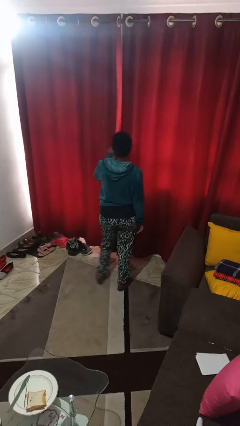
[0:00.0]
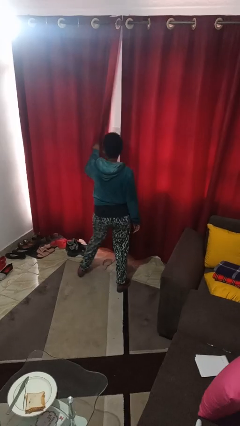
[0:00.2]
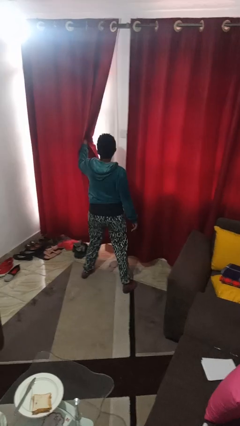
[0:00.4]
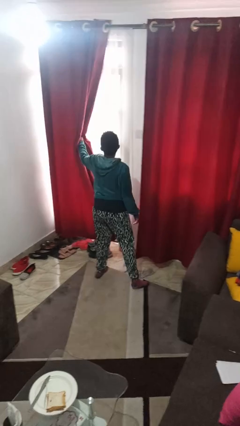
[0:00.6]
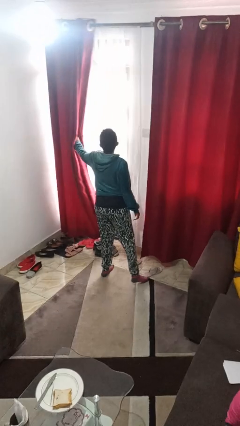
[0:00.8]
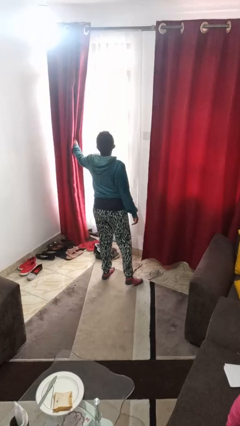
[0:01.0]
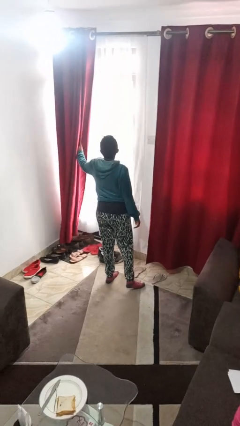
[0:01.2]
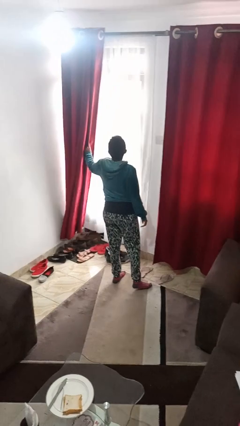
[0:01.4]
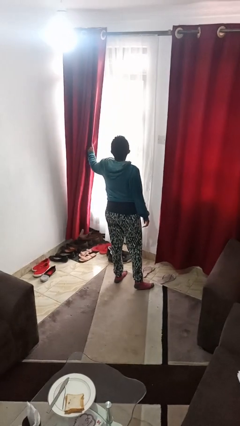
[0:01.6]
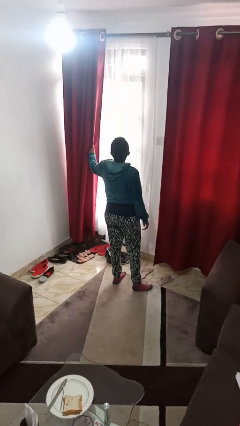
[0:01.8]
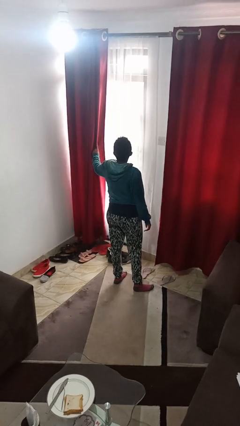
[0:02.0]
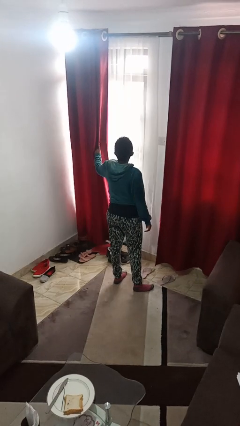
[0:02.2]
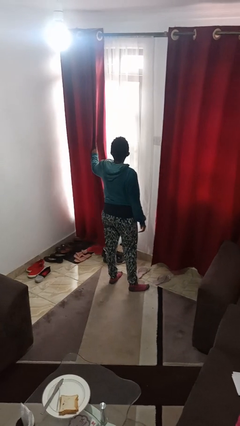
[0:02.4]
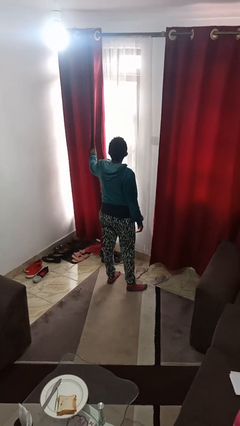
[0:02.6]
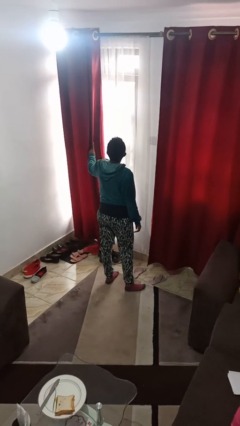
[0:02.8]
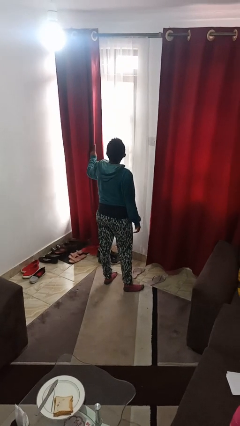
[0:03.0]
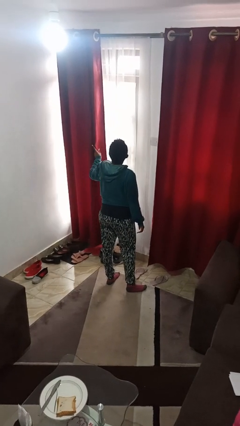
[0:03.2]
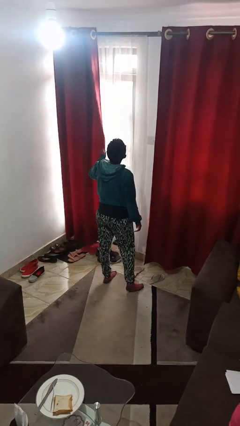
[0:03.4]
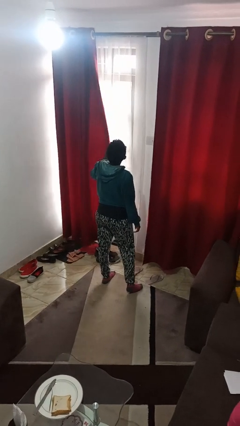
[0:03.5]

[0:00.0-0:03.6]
person opens curtains

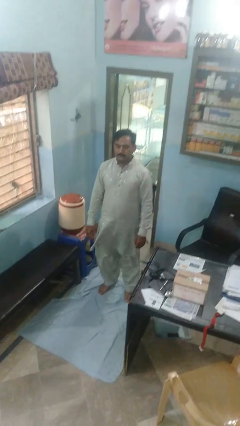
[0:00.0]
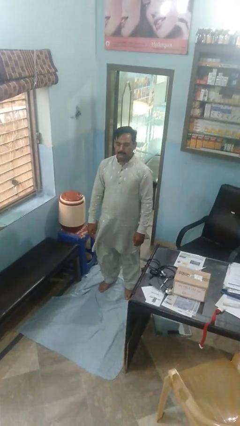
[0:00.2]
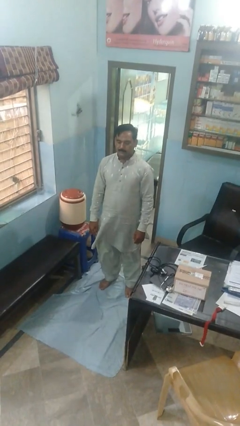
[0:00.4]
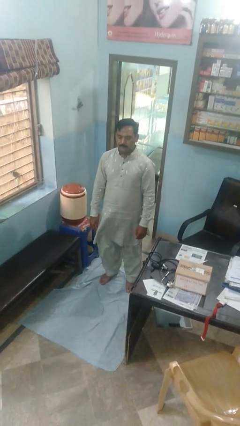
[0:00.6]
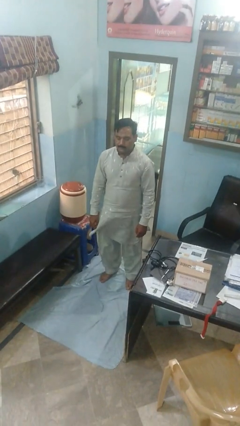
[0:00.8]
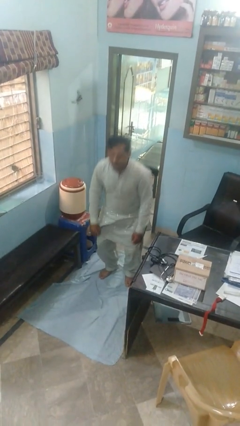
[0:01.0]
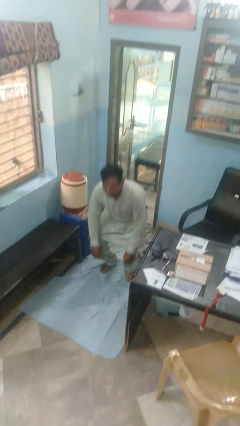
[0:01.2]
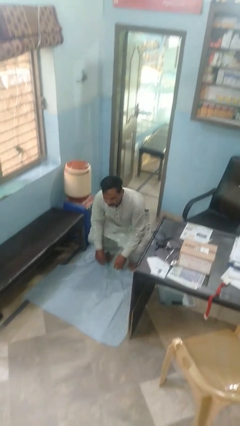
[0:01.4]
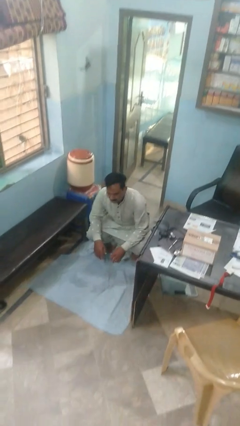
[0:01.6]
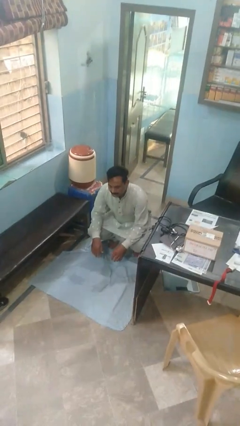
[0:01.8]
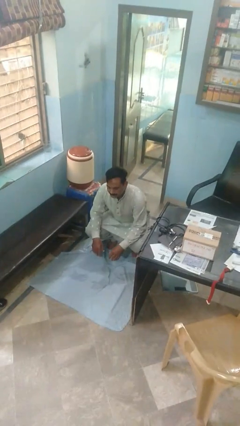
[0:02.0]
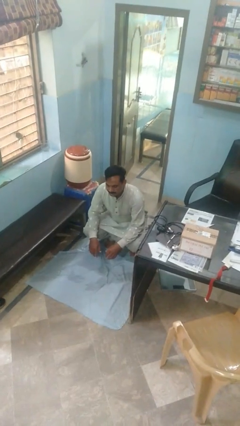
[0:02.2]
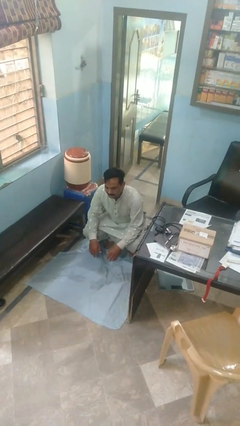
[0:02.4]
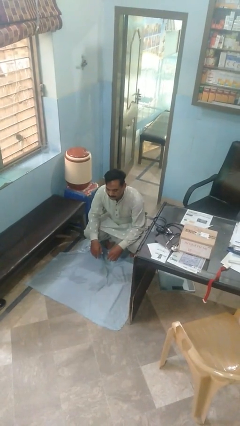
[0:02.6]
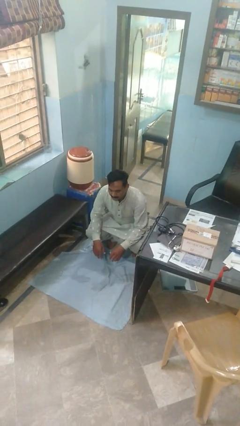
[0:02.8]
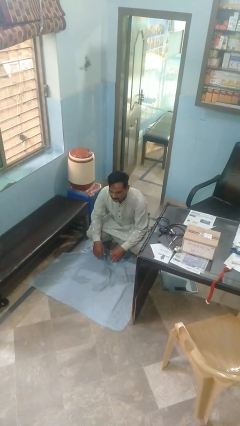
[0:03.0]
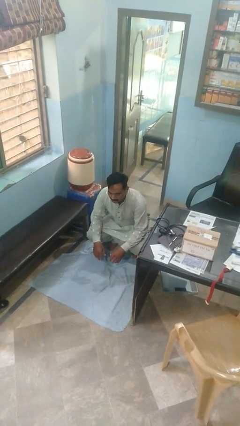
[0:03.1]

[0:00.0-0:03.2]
person squats

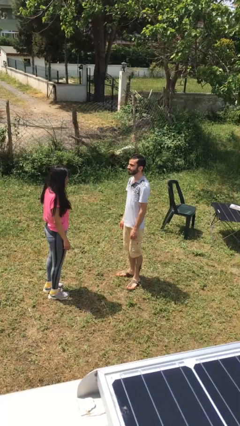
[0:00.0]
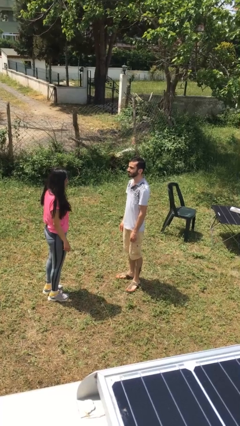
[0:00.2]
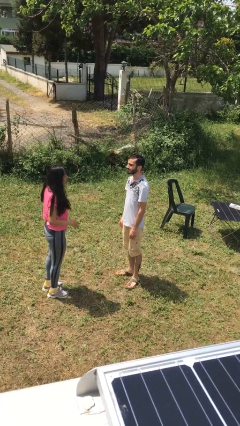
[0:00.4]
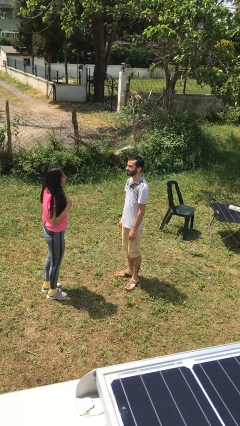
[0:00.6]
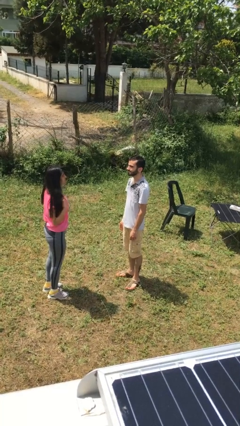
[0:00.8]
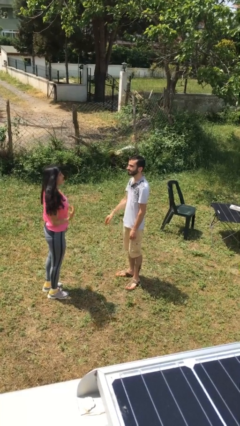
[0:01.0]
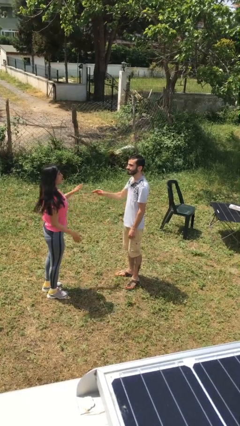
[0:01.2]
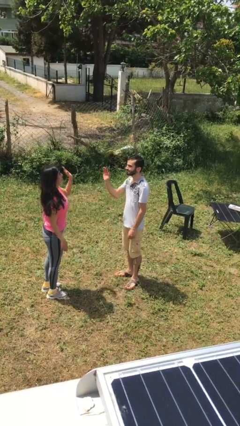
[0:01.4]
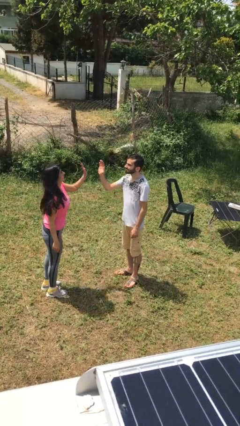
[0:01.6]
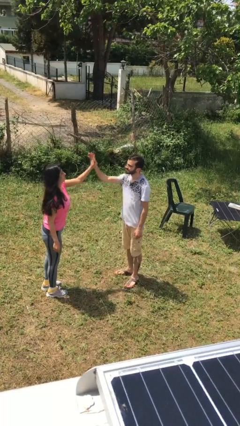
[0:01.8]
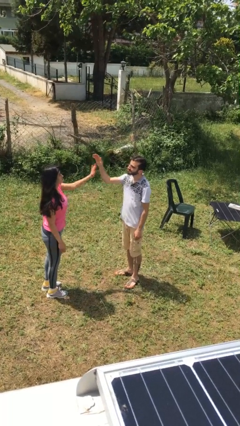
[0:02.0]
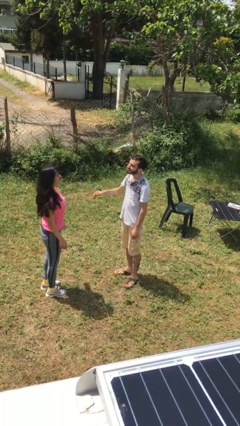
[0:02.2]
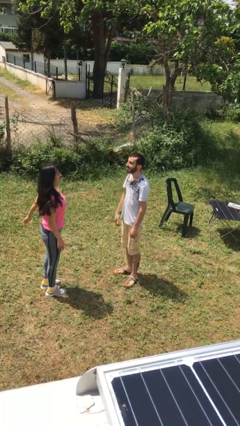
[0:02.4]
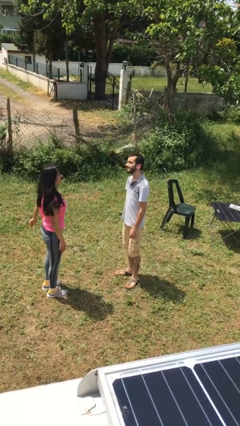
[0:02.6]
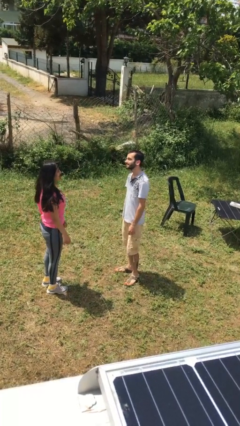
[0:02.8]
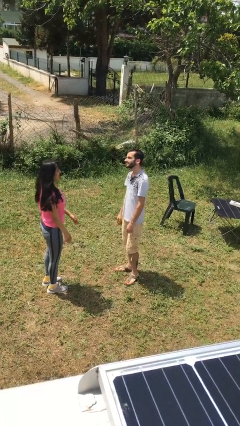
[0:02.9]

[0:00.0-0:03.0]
person highfives hand

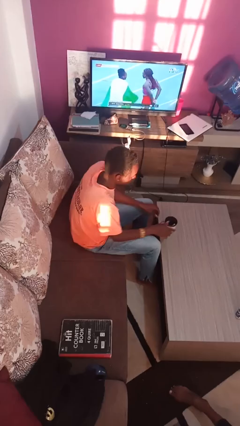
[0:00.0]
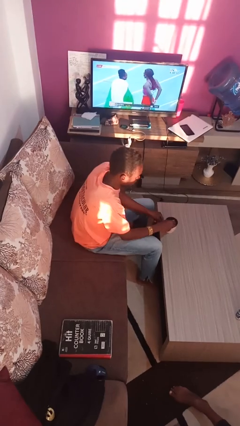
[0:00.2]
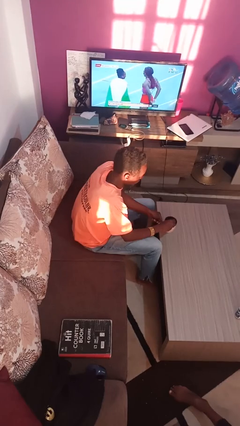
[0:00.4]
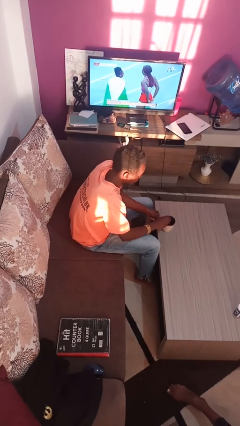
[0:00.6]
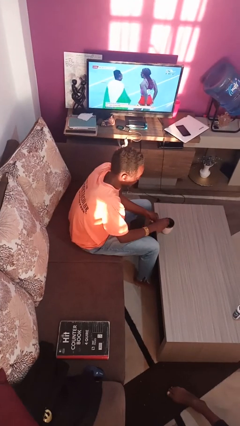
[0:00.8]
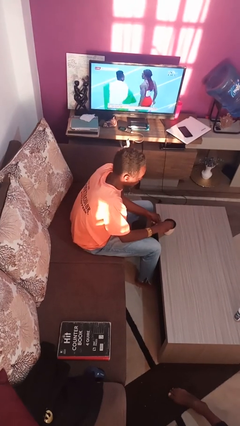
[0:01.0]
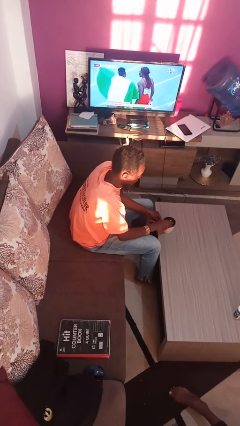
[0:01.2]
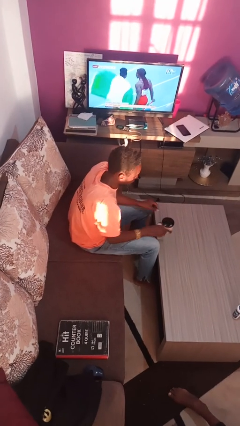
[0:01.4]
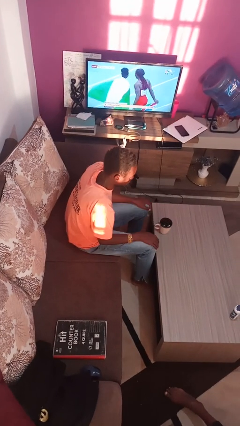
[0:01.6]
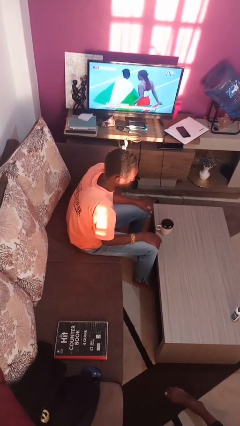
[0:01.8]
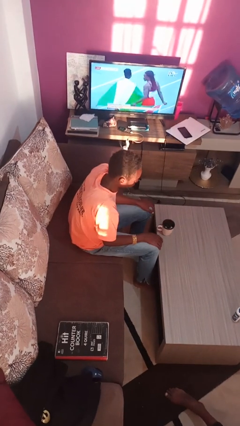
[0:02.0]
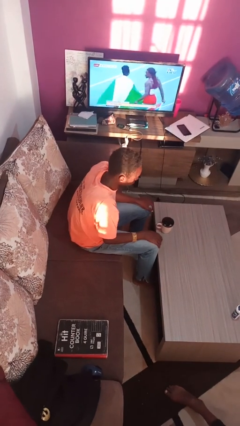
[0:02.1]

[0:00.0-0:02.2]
person stirs mug

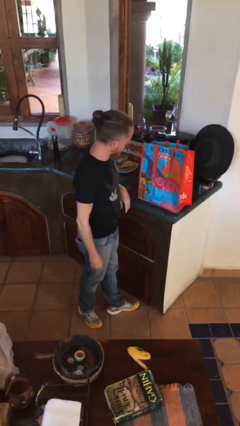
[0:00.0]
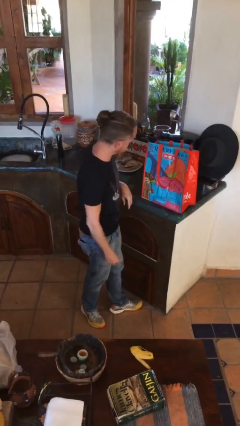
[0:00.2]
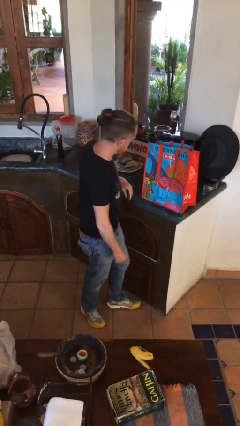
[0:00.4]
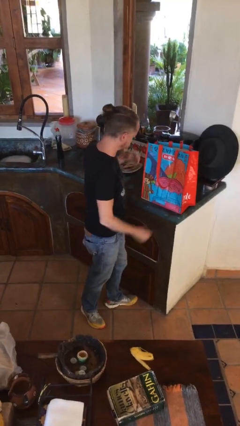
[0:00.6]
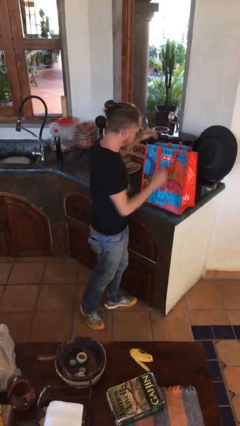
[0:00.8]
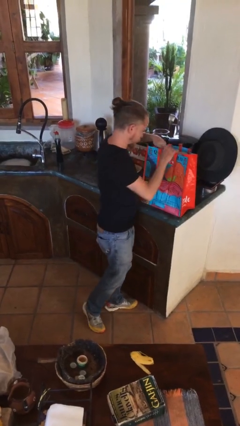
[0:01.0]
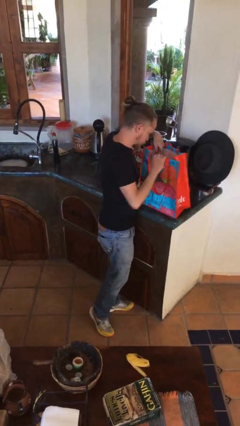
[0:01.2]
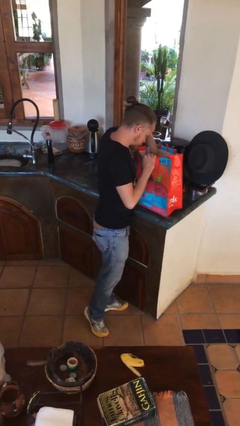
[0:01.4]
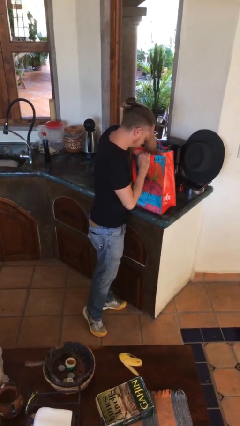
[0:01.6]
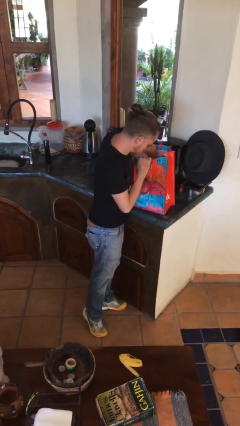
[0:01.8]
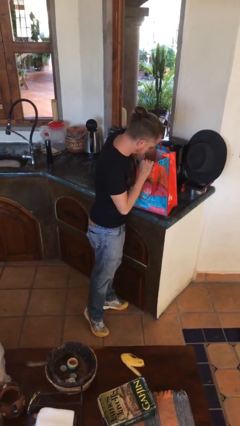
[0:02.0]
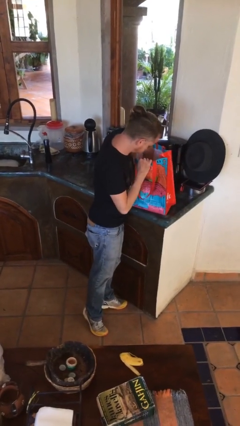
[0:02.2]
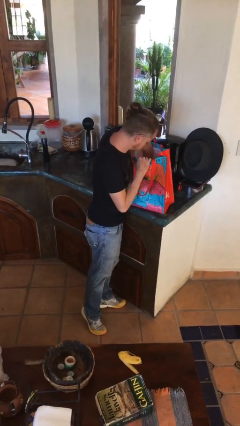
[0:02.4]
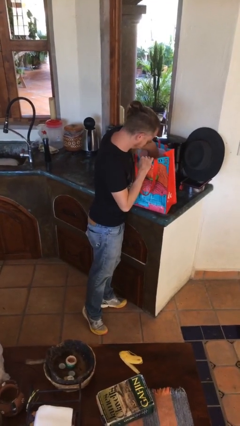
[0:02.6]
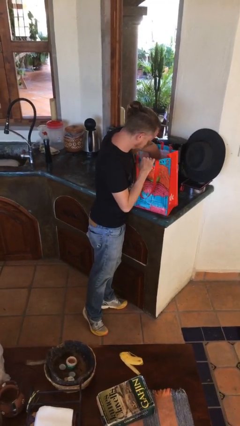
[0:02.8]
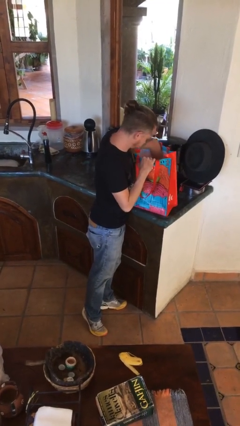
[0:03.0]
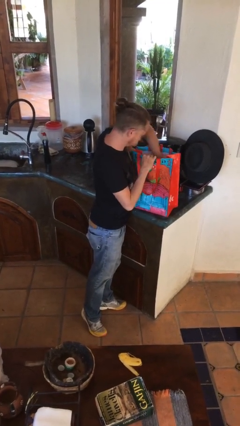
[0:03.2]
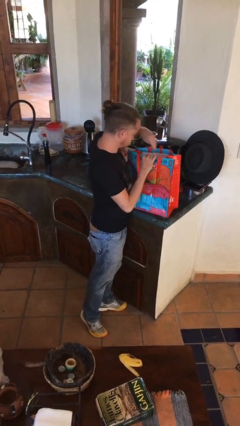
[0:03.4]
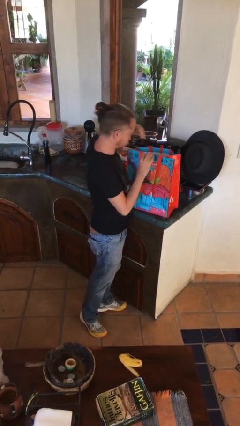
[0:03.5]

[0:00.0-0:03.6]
person searches in bag

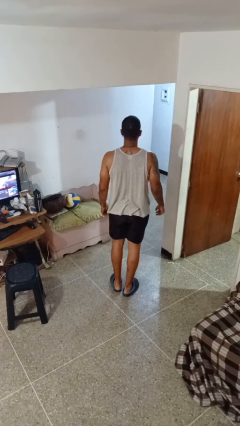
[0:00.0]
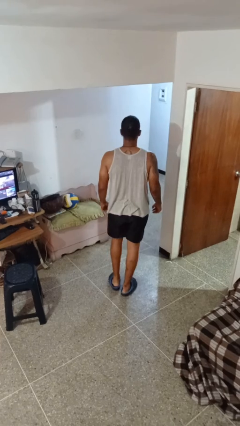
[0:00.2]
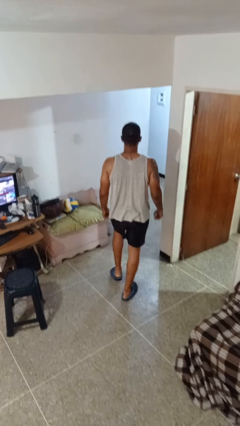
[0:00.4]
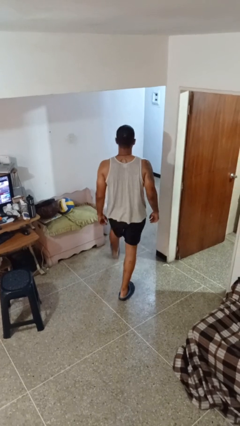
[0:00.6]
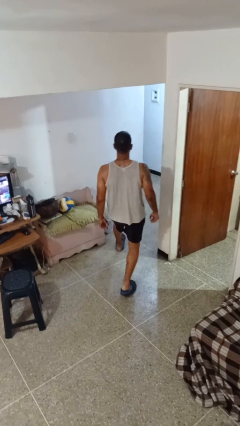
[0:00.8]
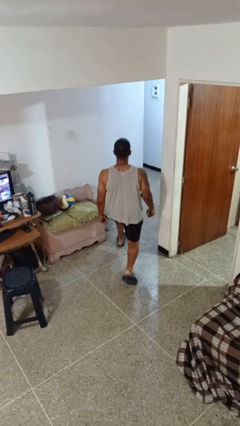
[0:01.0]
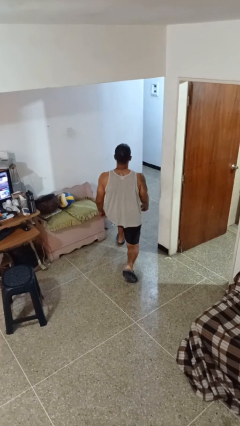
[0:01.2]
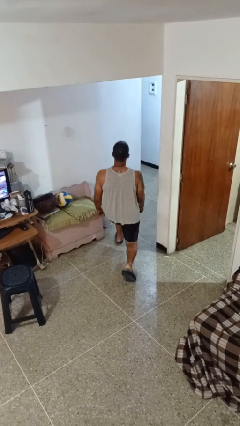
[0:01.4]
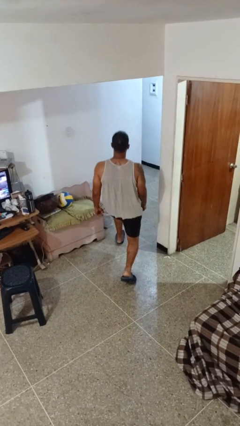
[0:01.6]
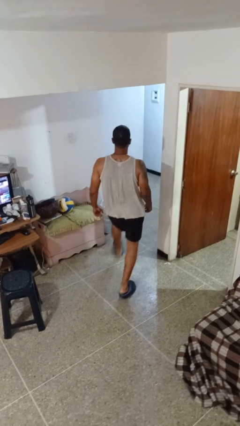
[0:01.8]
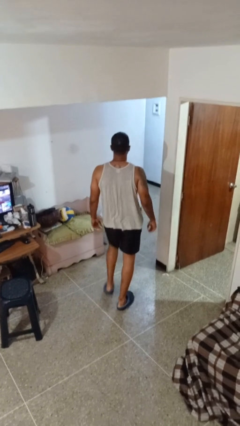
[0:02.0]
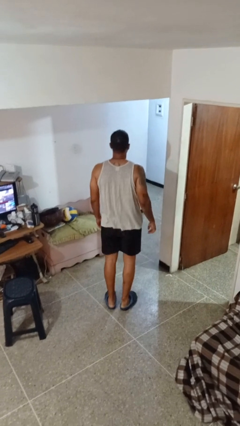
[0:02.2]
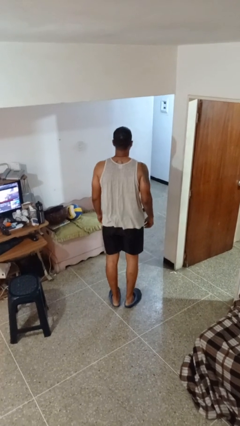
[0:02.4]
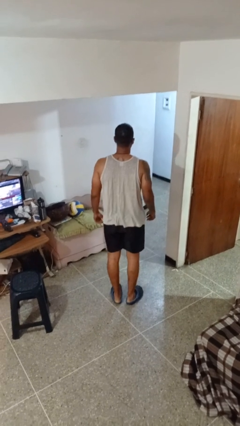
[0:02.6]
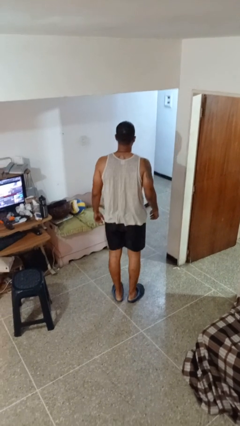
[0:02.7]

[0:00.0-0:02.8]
person exercises with lunges
